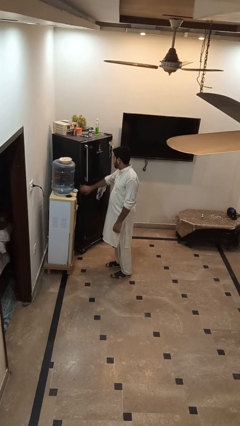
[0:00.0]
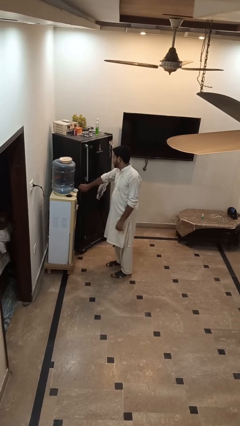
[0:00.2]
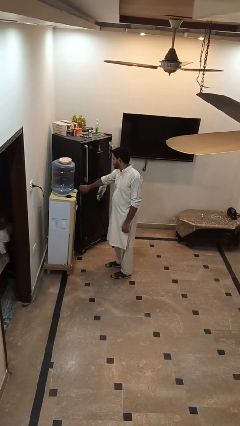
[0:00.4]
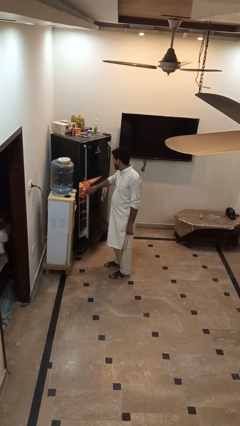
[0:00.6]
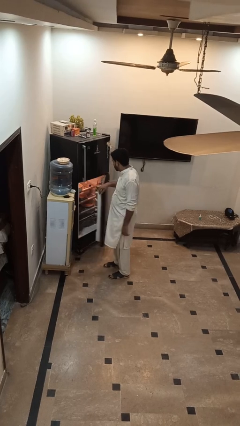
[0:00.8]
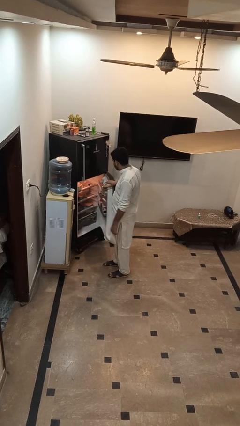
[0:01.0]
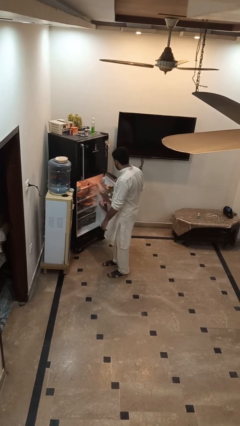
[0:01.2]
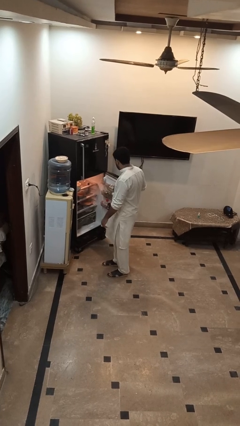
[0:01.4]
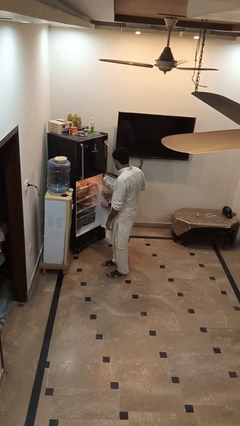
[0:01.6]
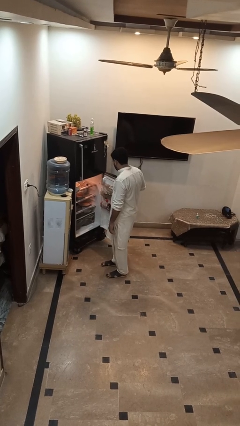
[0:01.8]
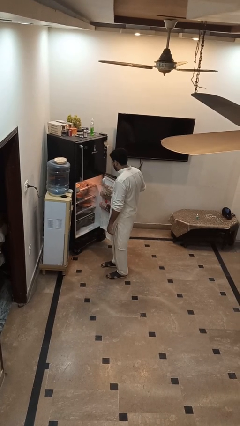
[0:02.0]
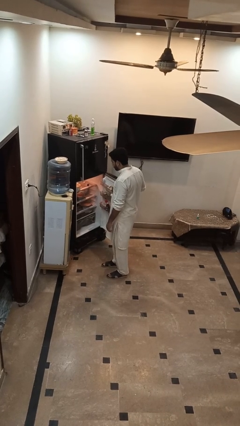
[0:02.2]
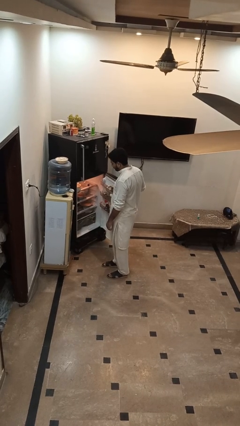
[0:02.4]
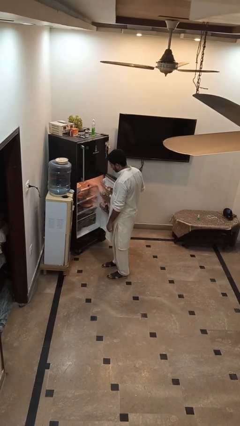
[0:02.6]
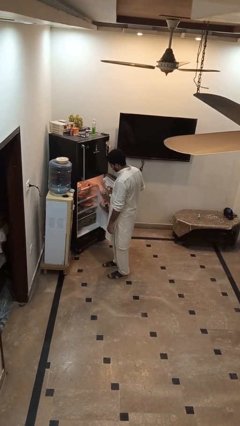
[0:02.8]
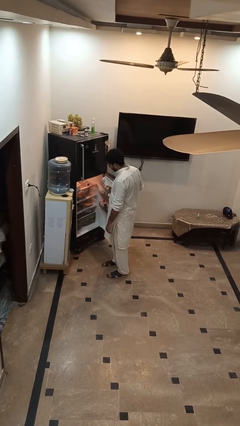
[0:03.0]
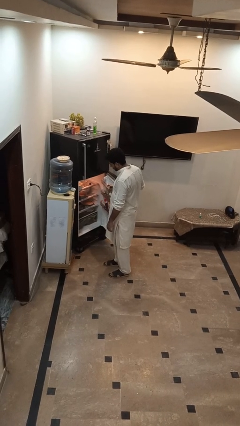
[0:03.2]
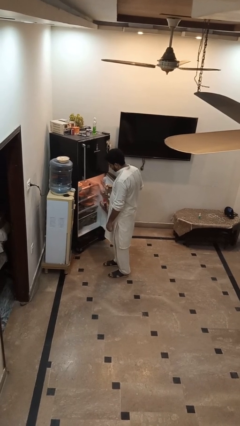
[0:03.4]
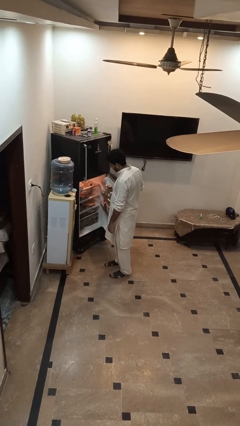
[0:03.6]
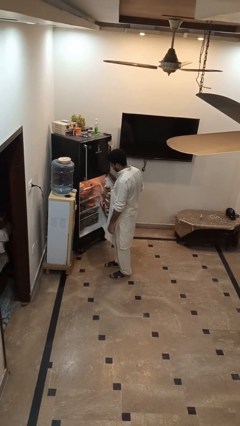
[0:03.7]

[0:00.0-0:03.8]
person opens refrigerator

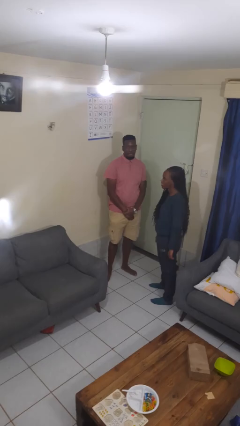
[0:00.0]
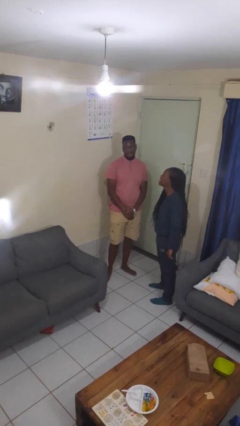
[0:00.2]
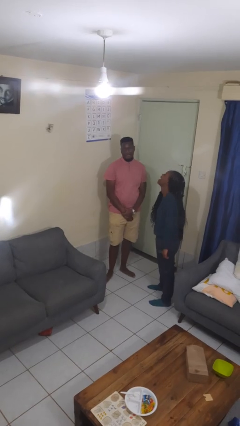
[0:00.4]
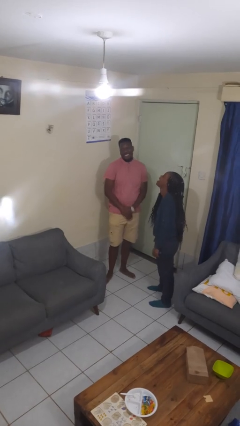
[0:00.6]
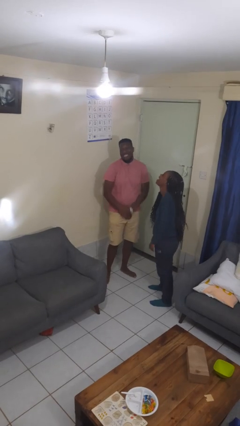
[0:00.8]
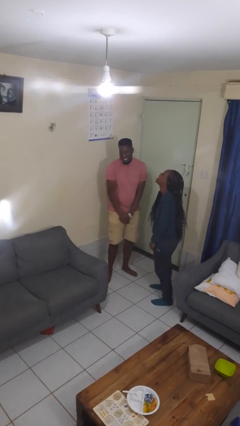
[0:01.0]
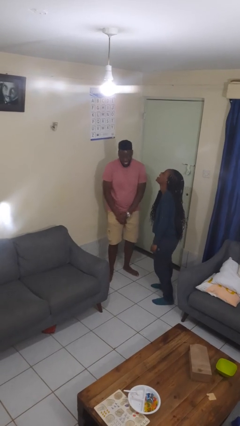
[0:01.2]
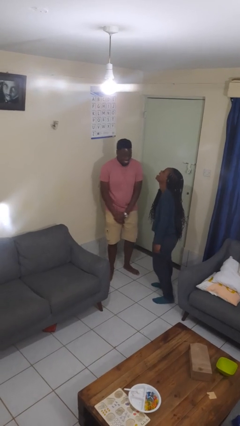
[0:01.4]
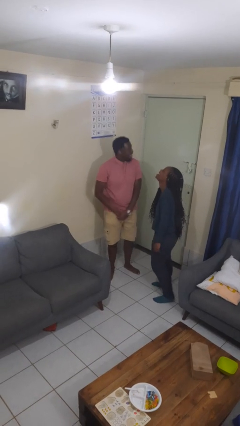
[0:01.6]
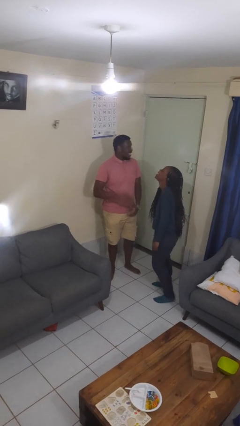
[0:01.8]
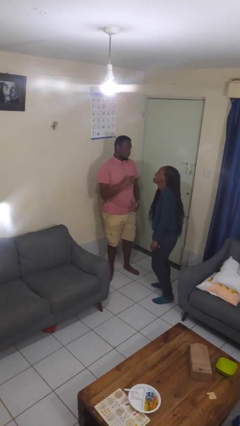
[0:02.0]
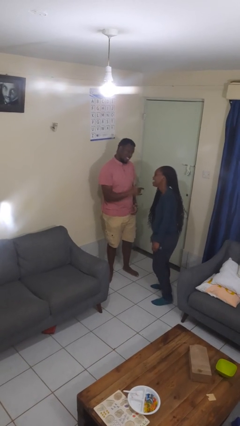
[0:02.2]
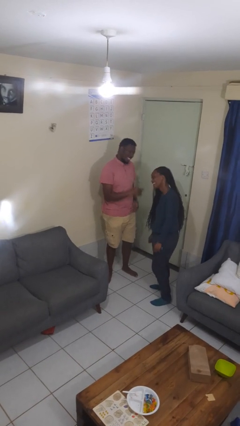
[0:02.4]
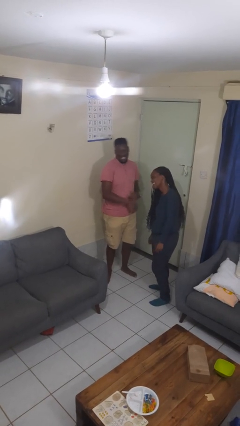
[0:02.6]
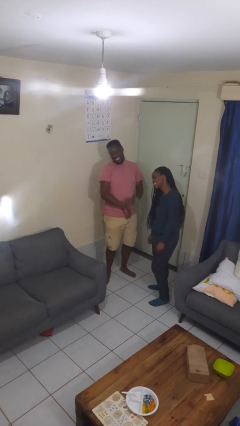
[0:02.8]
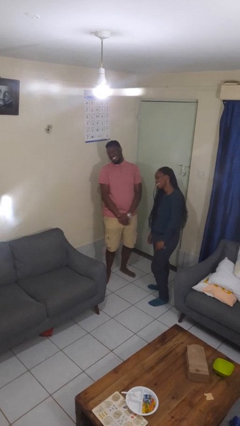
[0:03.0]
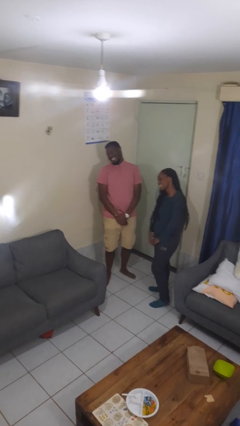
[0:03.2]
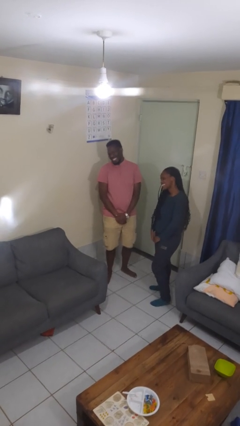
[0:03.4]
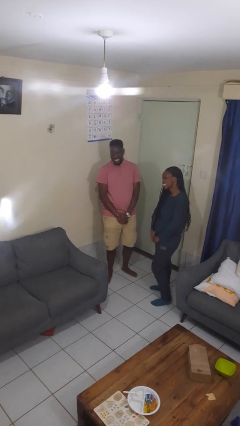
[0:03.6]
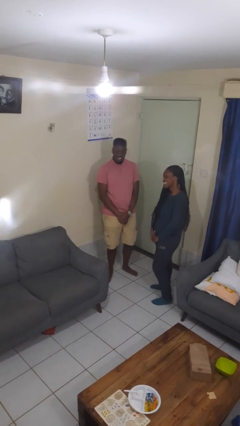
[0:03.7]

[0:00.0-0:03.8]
person laughs with person

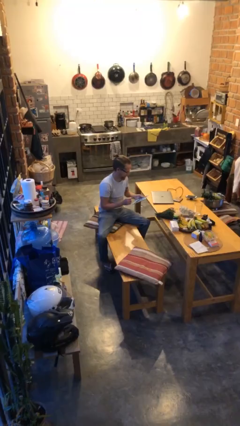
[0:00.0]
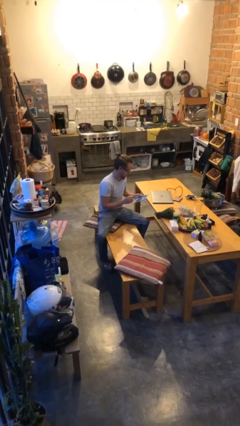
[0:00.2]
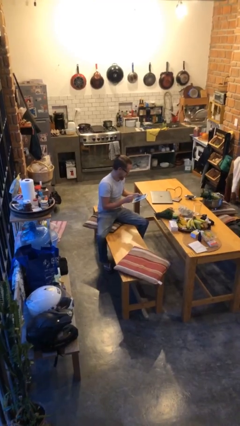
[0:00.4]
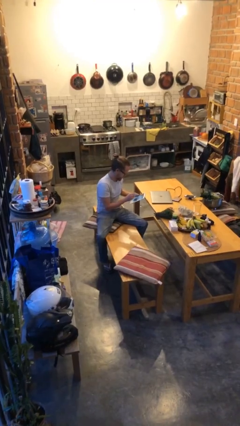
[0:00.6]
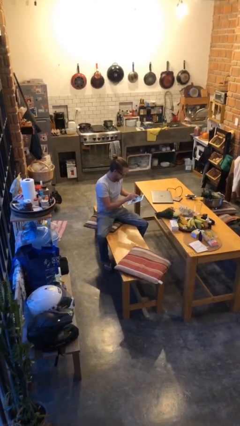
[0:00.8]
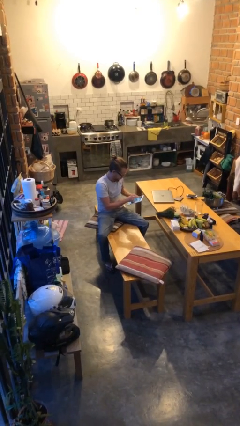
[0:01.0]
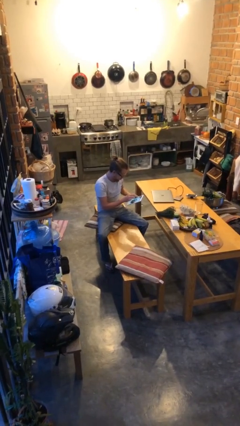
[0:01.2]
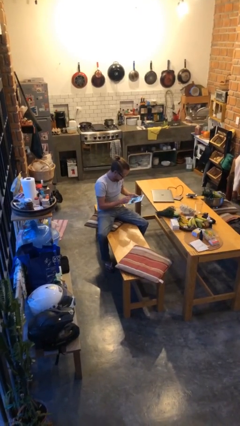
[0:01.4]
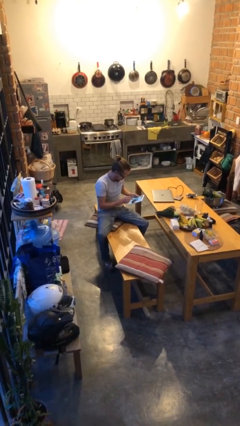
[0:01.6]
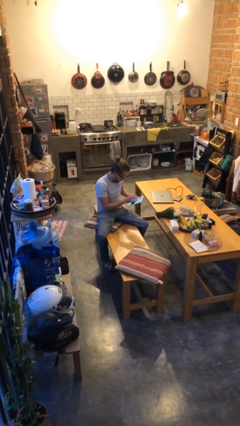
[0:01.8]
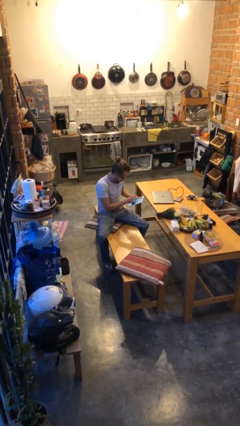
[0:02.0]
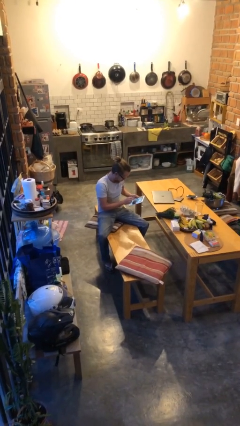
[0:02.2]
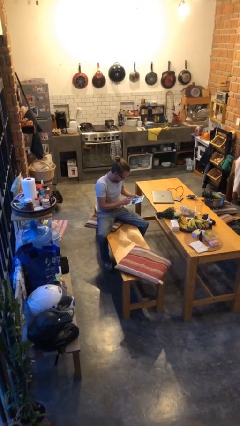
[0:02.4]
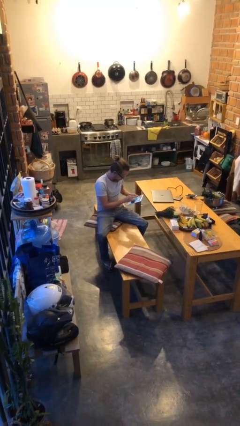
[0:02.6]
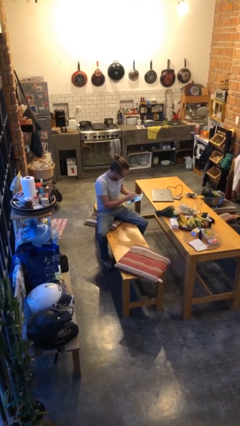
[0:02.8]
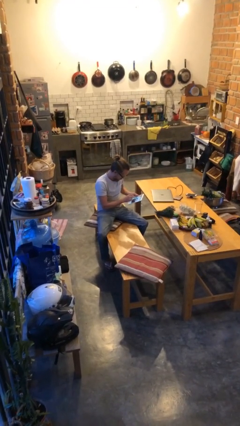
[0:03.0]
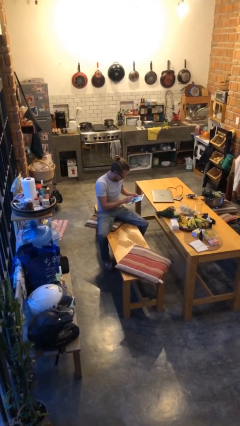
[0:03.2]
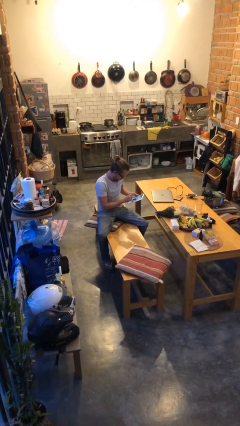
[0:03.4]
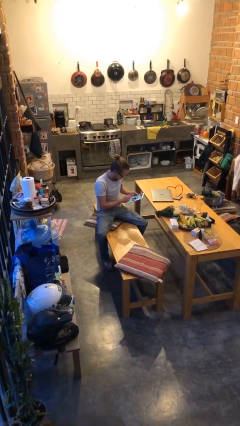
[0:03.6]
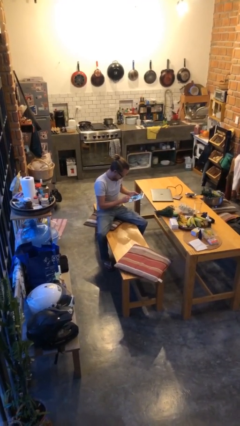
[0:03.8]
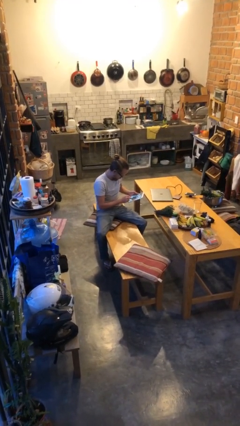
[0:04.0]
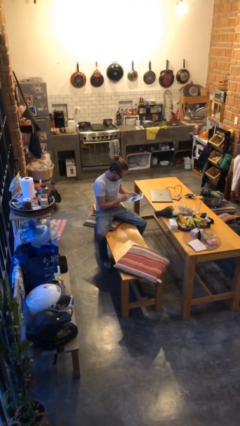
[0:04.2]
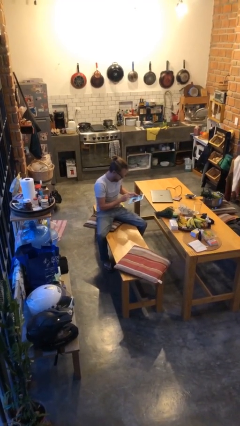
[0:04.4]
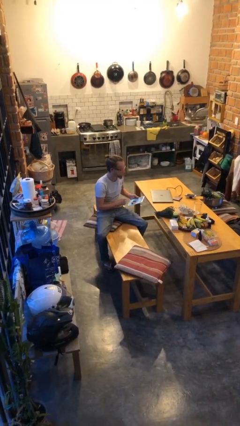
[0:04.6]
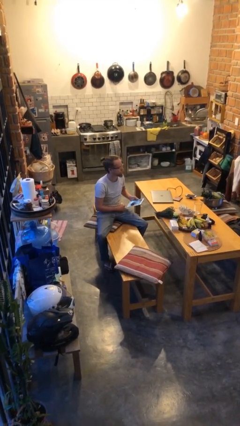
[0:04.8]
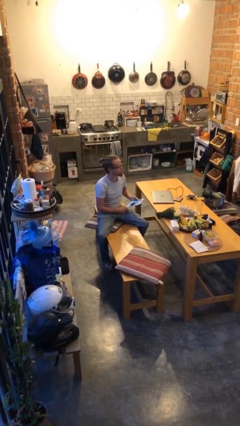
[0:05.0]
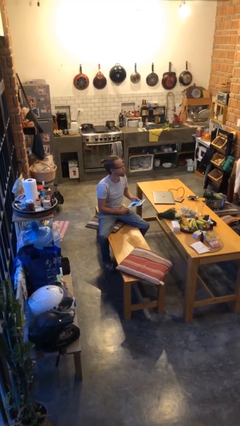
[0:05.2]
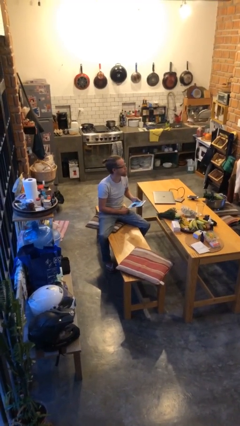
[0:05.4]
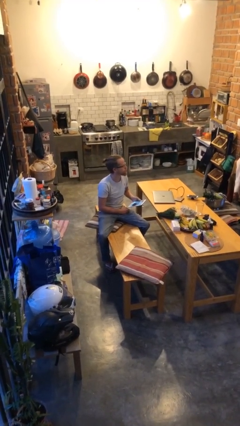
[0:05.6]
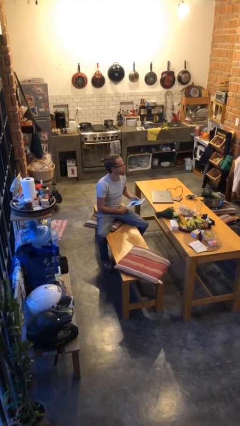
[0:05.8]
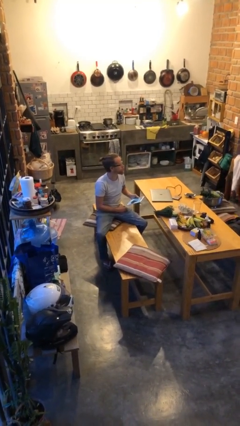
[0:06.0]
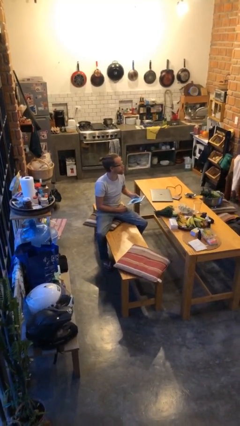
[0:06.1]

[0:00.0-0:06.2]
person interacts with tablet

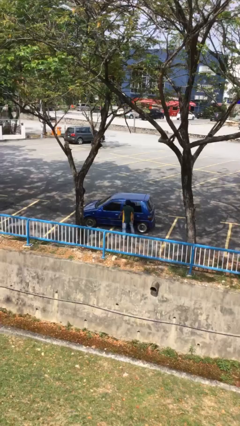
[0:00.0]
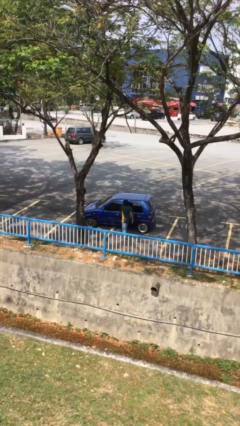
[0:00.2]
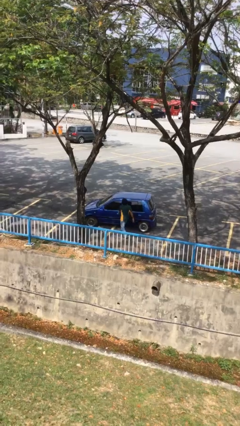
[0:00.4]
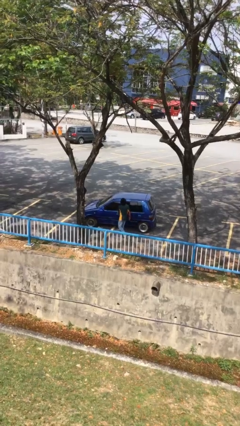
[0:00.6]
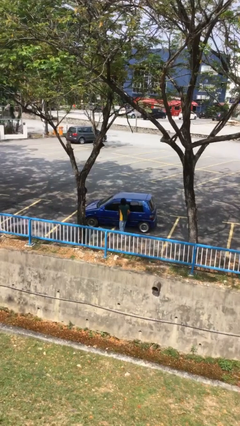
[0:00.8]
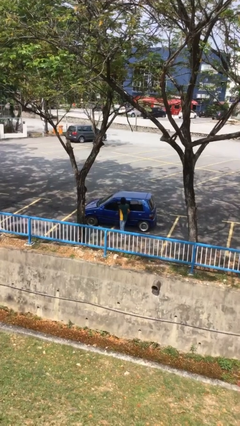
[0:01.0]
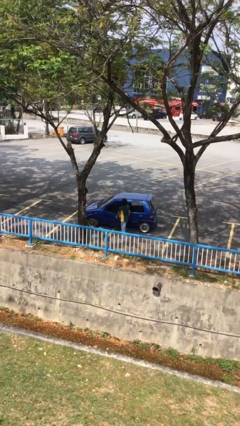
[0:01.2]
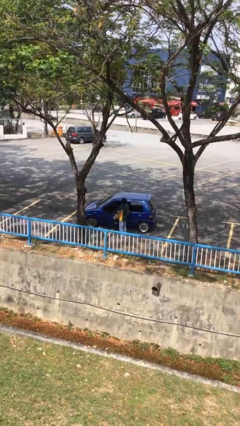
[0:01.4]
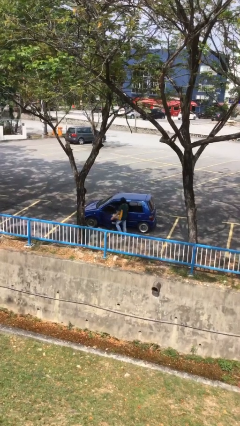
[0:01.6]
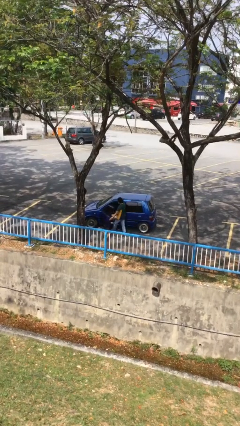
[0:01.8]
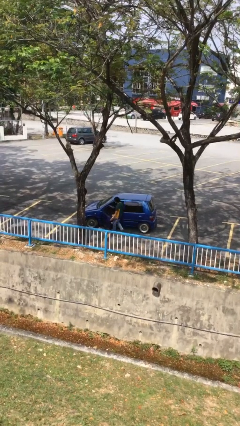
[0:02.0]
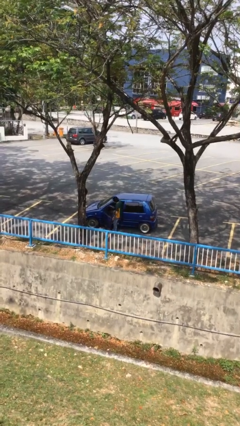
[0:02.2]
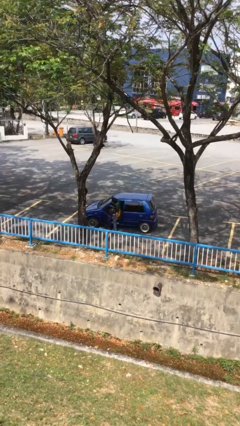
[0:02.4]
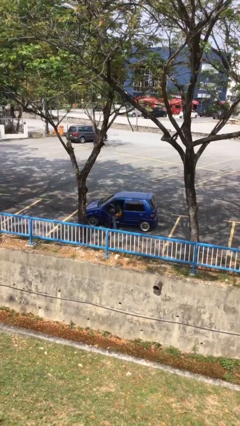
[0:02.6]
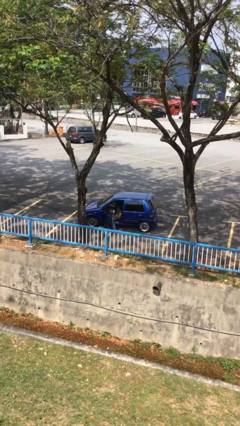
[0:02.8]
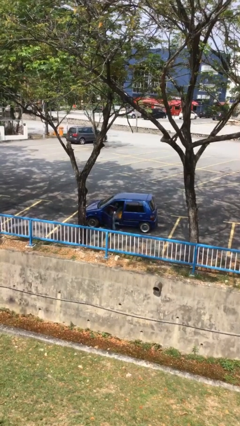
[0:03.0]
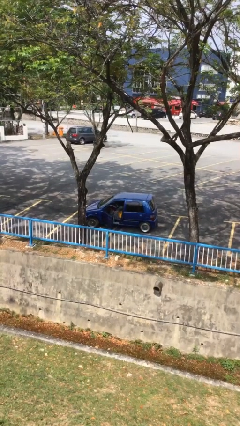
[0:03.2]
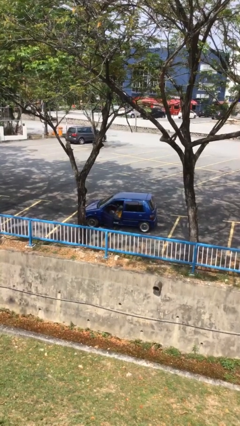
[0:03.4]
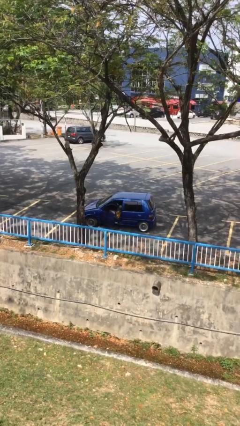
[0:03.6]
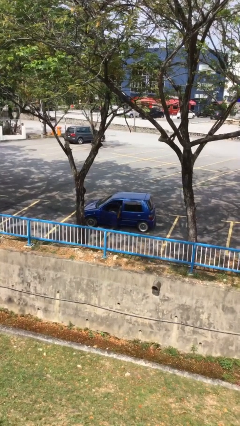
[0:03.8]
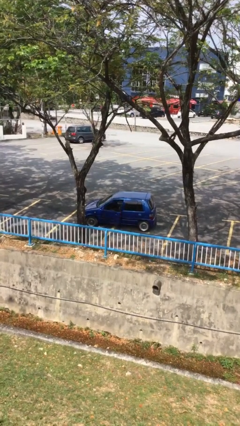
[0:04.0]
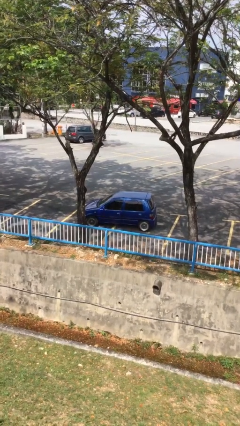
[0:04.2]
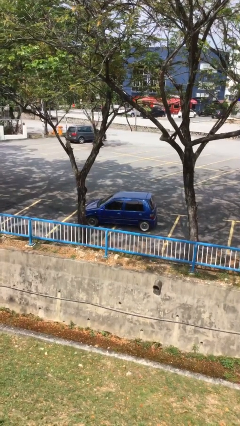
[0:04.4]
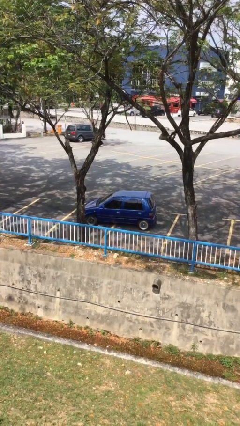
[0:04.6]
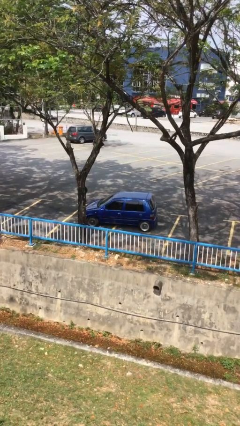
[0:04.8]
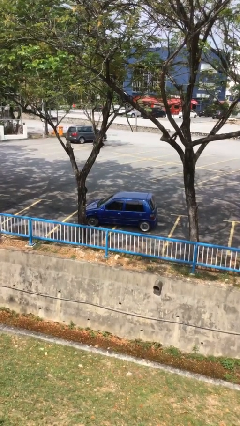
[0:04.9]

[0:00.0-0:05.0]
car picks up person
